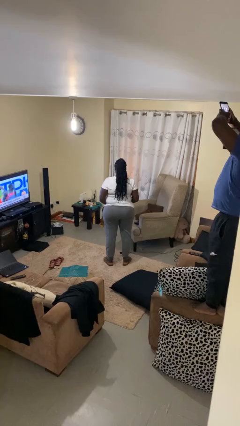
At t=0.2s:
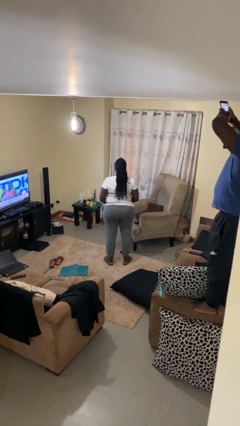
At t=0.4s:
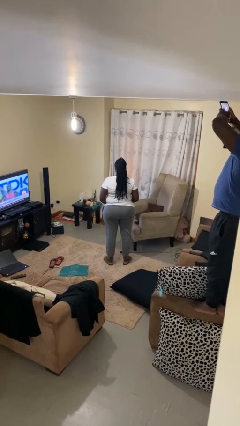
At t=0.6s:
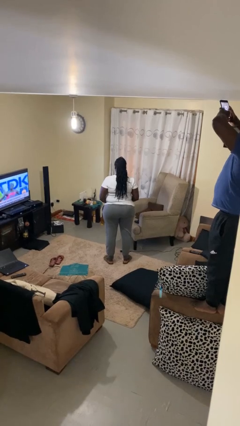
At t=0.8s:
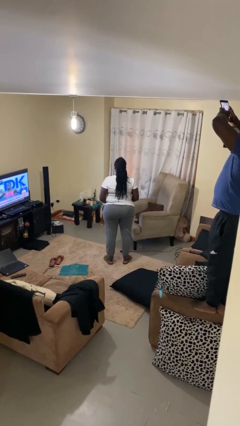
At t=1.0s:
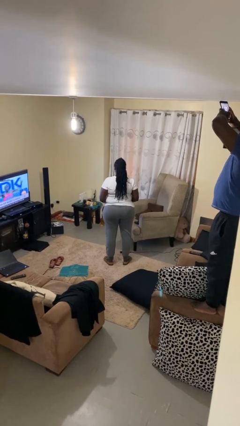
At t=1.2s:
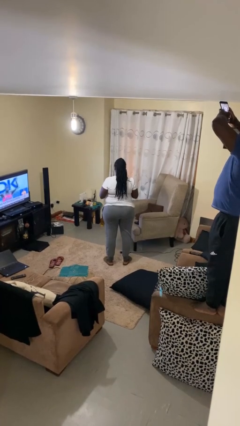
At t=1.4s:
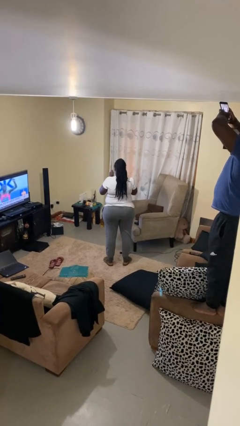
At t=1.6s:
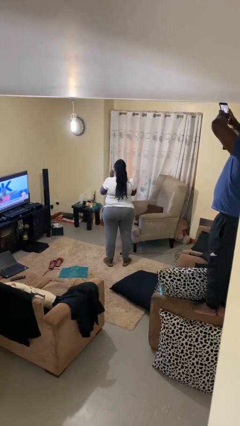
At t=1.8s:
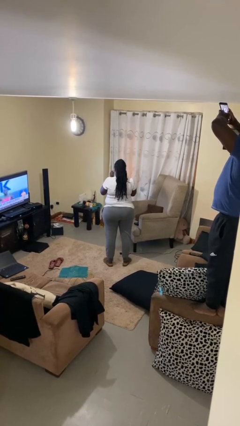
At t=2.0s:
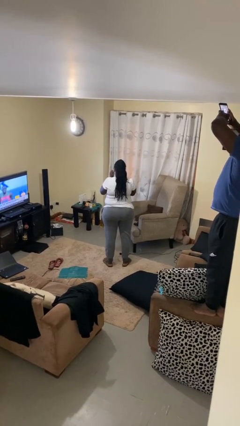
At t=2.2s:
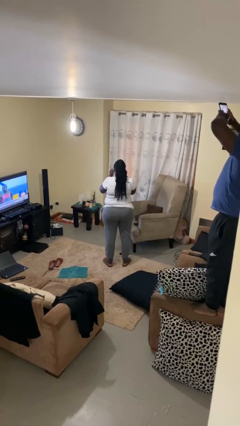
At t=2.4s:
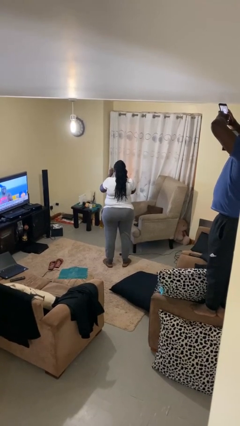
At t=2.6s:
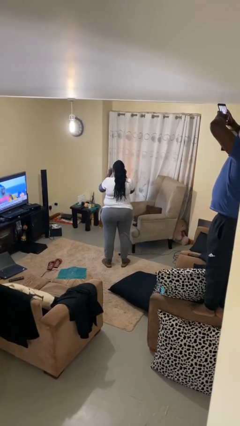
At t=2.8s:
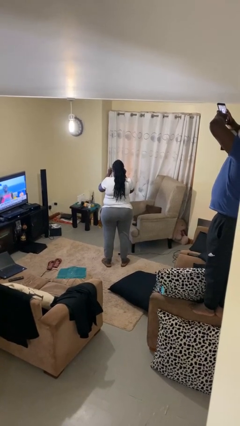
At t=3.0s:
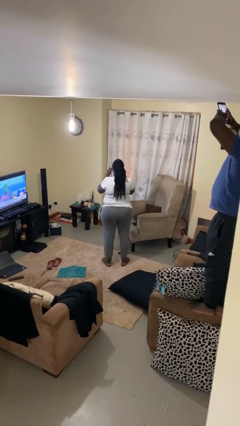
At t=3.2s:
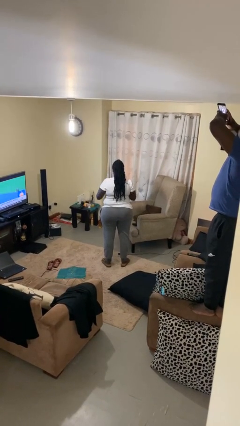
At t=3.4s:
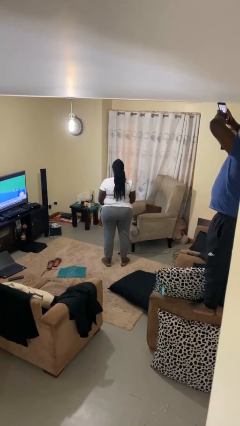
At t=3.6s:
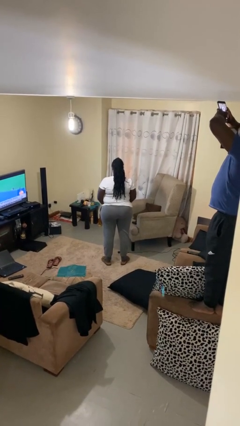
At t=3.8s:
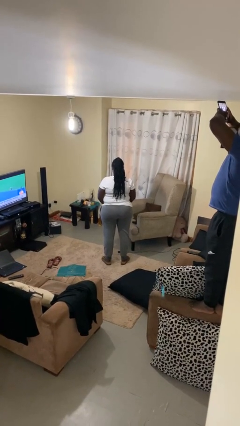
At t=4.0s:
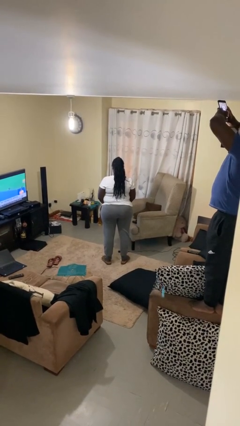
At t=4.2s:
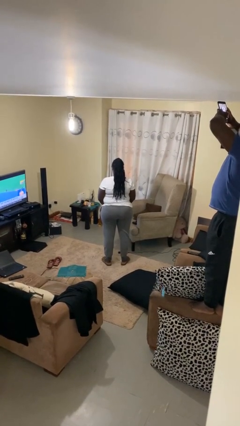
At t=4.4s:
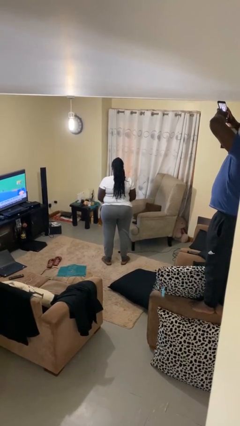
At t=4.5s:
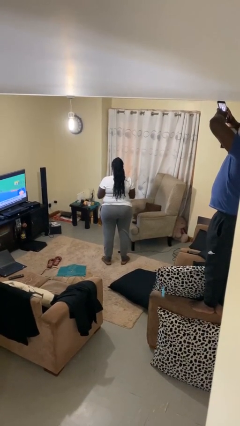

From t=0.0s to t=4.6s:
person puts on sunglasses

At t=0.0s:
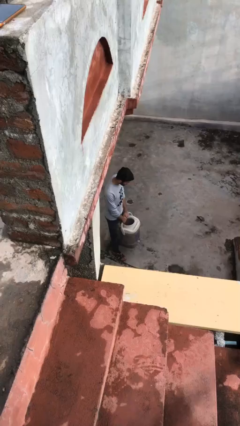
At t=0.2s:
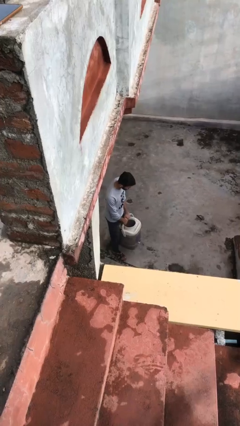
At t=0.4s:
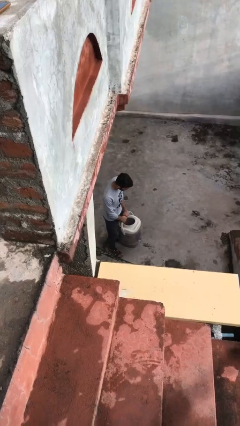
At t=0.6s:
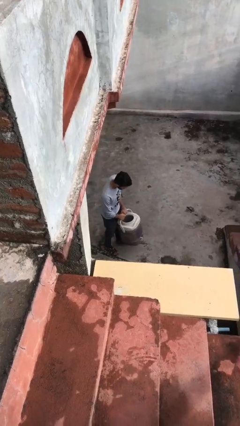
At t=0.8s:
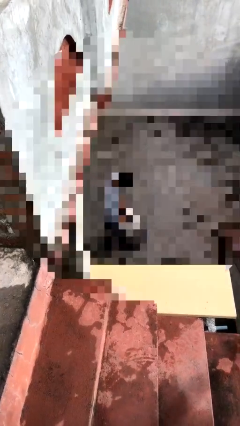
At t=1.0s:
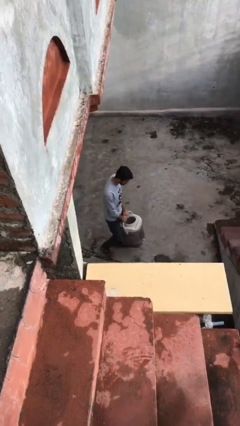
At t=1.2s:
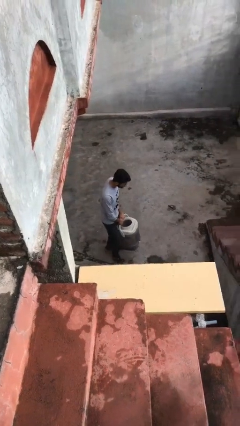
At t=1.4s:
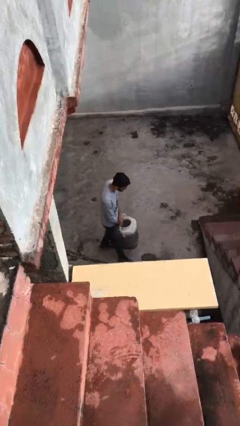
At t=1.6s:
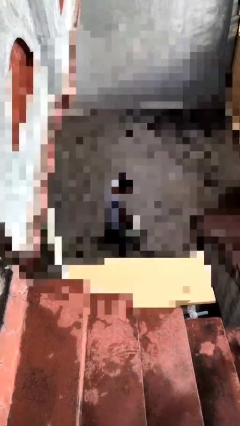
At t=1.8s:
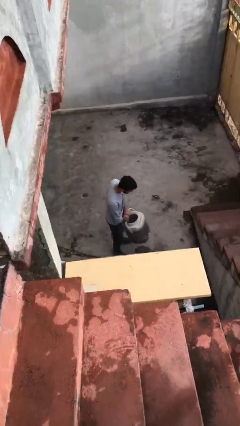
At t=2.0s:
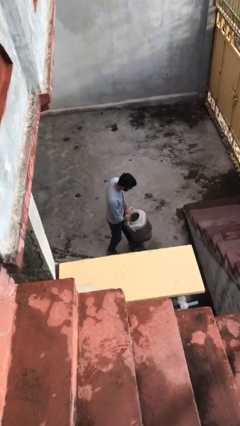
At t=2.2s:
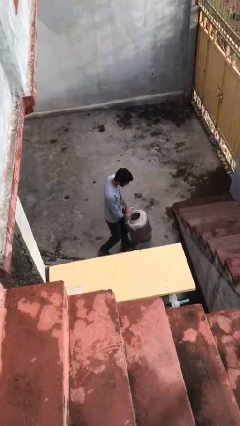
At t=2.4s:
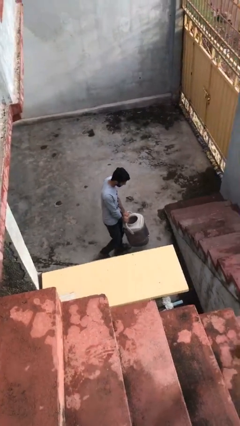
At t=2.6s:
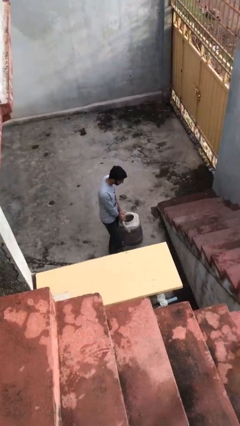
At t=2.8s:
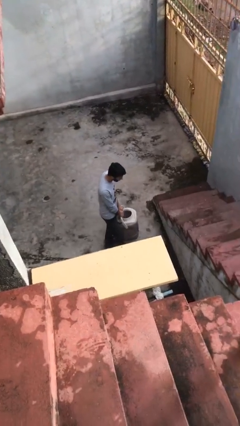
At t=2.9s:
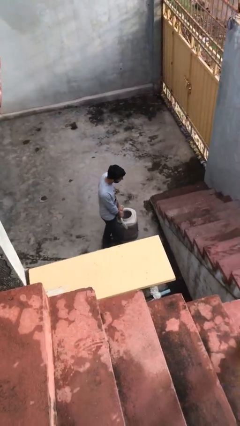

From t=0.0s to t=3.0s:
person carries heavy object

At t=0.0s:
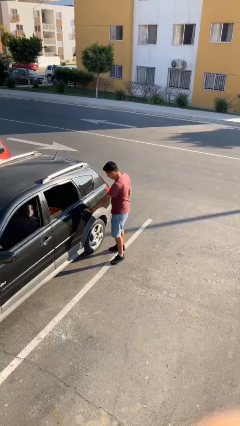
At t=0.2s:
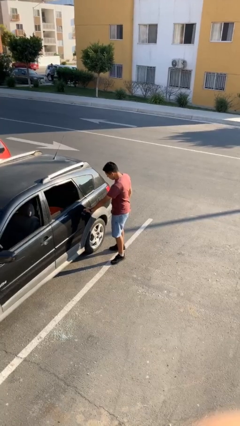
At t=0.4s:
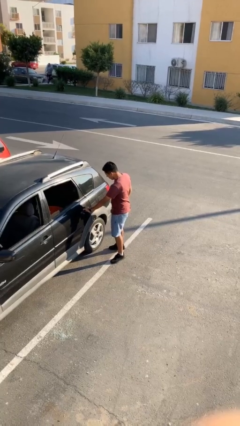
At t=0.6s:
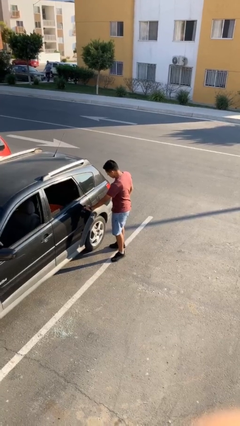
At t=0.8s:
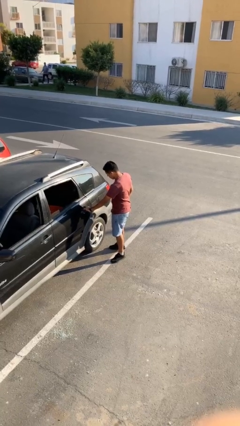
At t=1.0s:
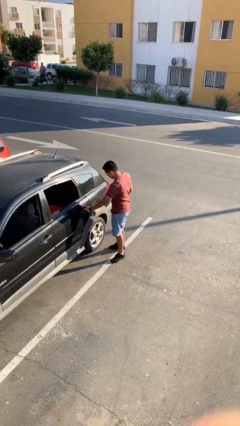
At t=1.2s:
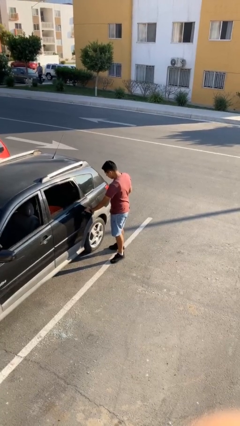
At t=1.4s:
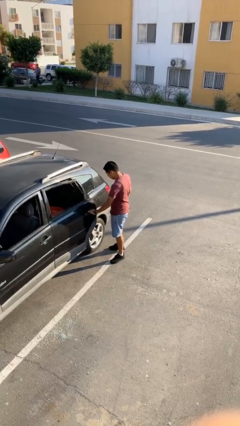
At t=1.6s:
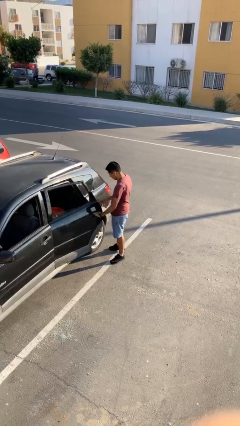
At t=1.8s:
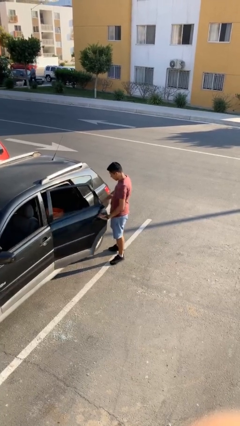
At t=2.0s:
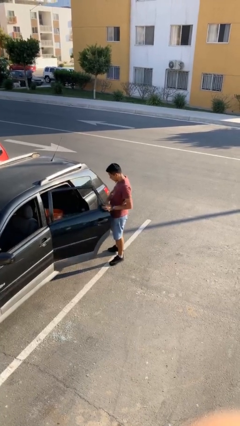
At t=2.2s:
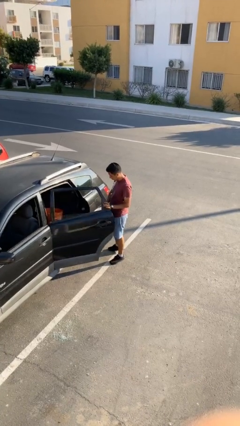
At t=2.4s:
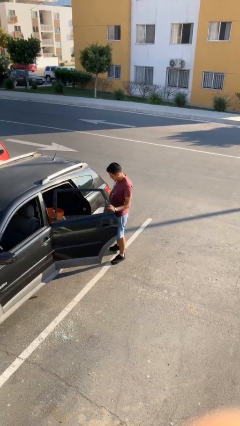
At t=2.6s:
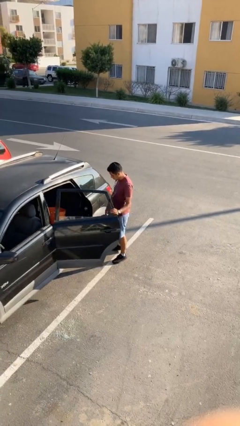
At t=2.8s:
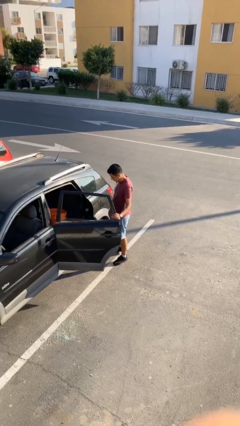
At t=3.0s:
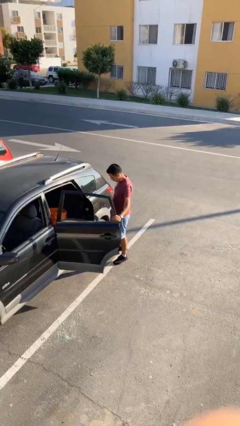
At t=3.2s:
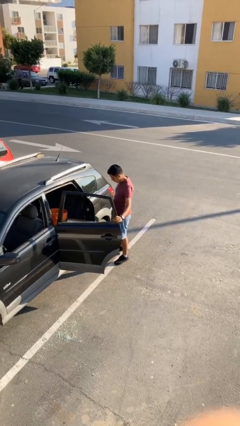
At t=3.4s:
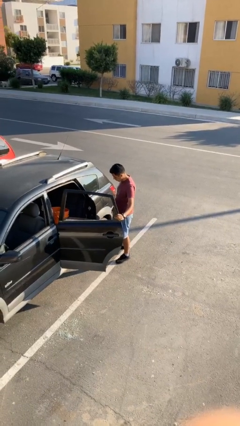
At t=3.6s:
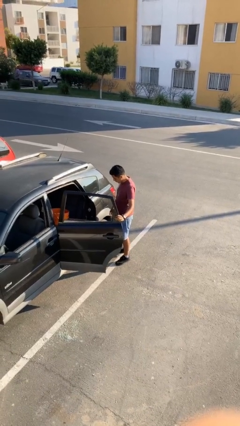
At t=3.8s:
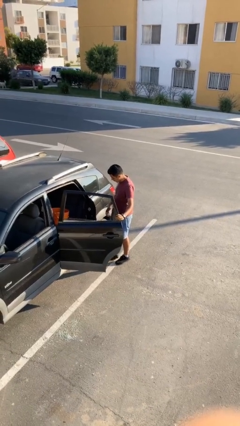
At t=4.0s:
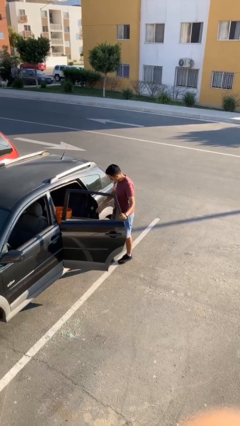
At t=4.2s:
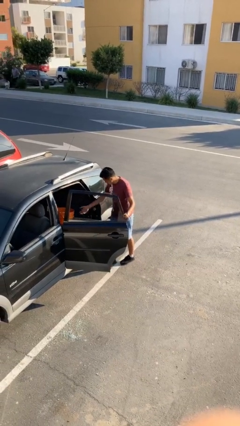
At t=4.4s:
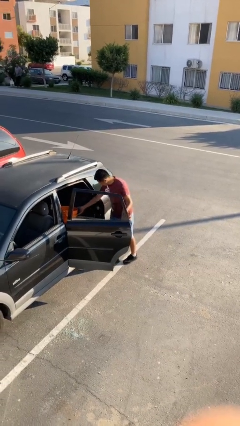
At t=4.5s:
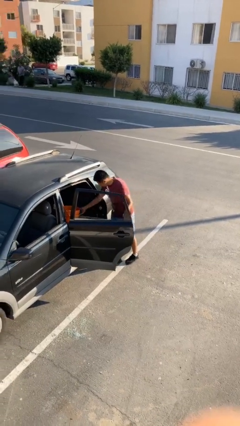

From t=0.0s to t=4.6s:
person opens car door

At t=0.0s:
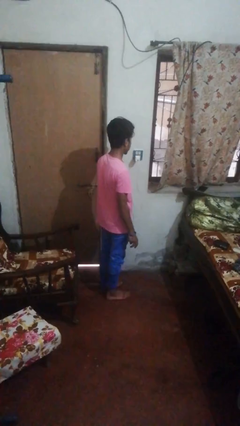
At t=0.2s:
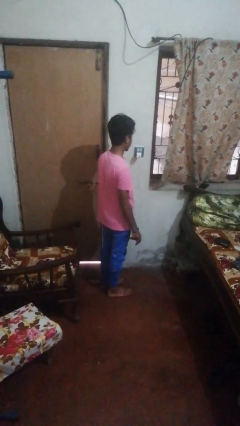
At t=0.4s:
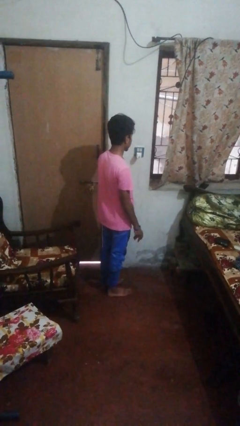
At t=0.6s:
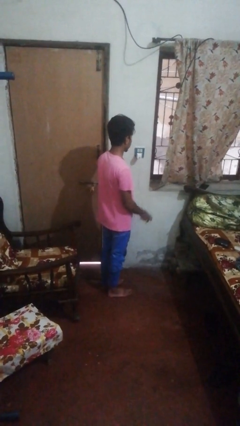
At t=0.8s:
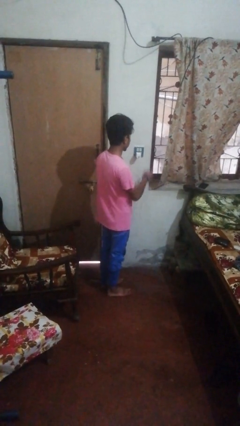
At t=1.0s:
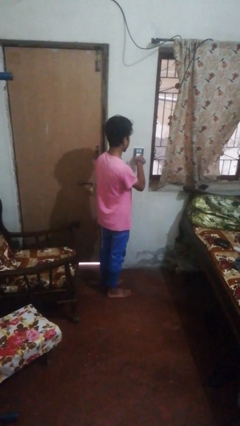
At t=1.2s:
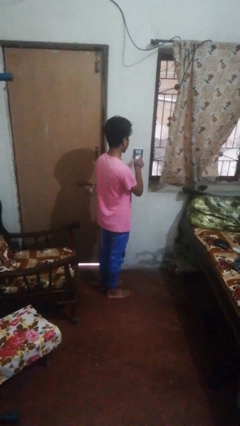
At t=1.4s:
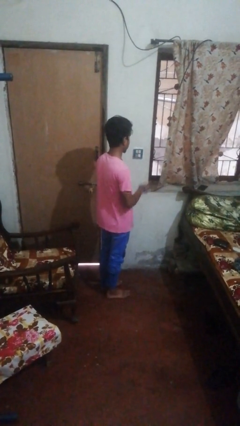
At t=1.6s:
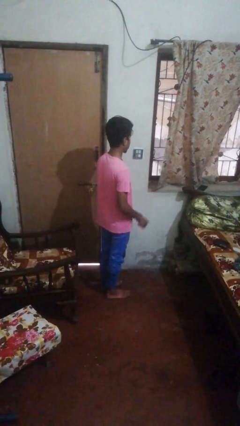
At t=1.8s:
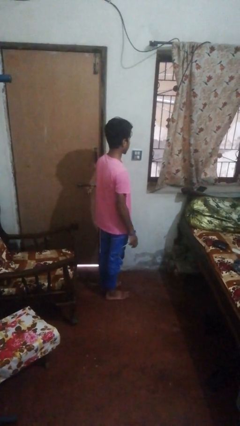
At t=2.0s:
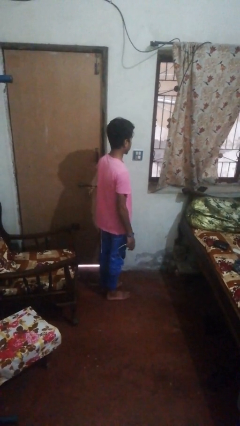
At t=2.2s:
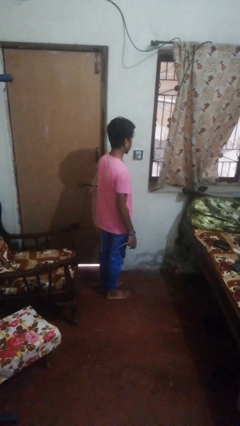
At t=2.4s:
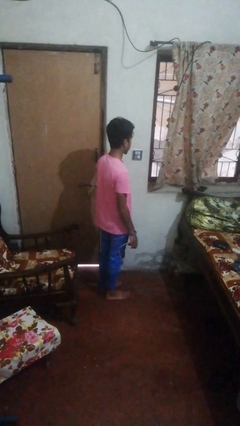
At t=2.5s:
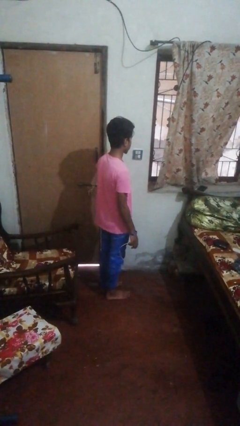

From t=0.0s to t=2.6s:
person unplugs from electrical socket

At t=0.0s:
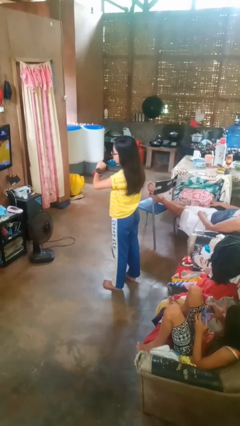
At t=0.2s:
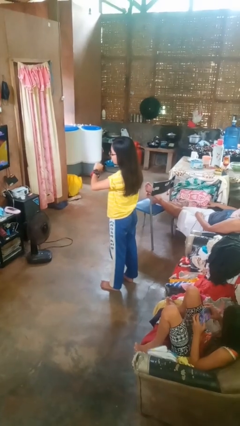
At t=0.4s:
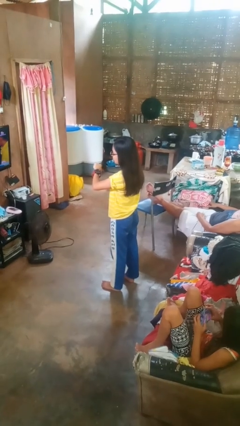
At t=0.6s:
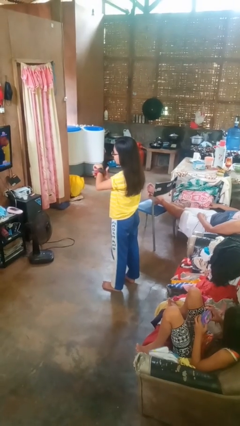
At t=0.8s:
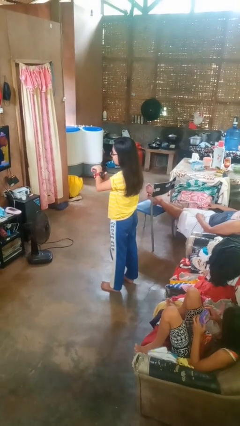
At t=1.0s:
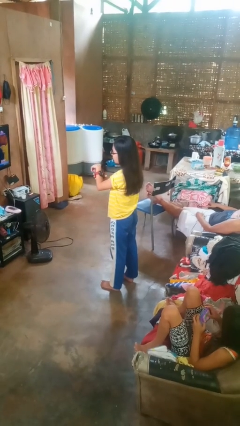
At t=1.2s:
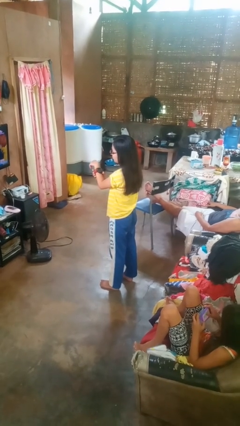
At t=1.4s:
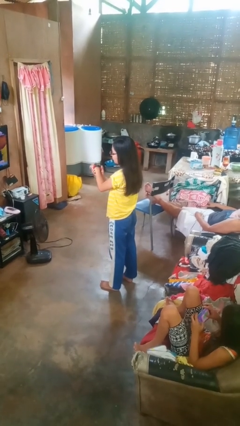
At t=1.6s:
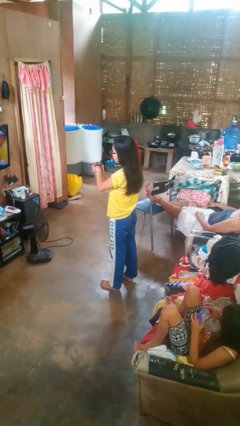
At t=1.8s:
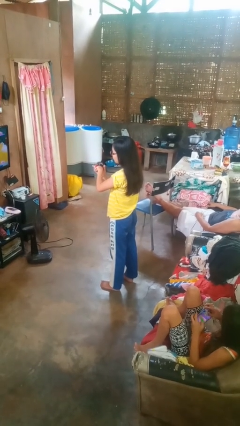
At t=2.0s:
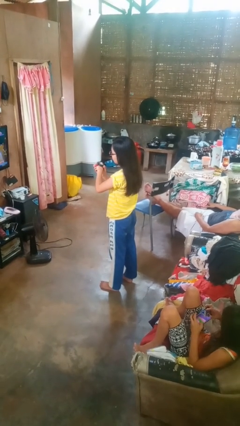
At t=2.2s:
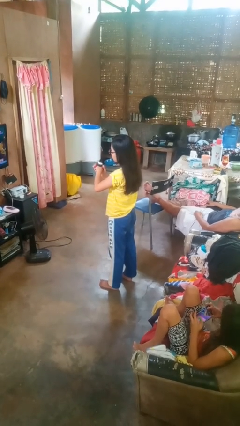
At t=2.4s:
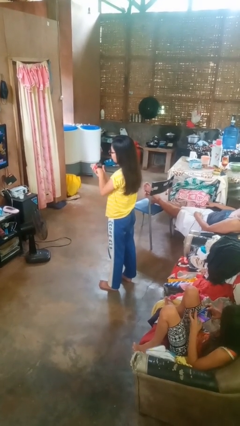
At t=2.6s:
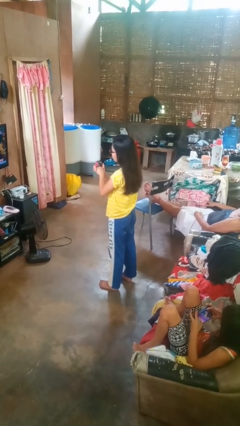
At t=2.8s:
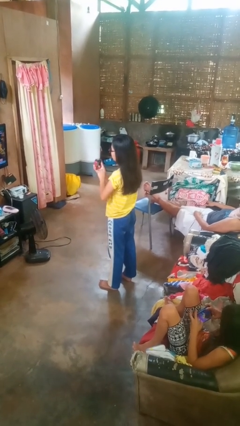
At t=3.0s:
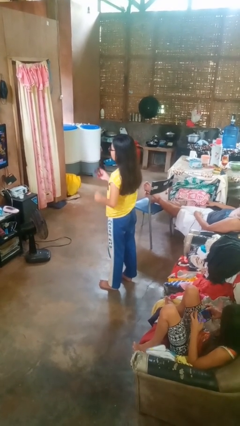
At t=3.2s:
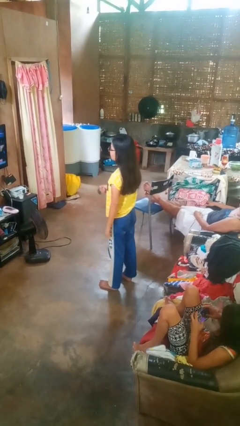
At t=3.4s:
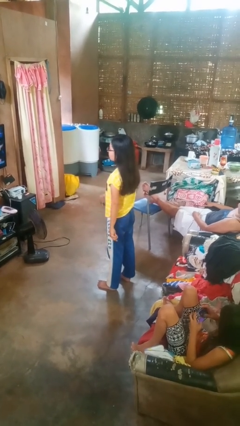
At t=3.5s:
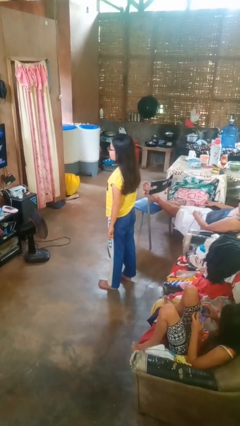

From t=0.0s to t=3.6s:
person takes off wristwatch
